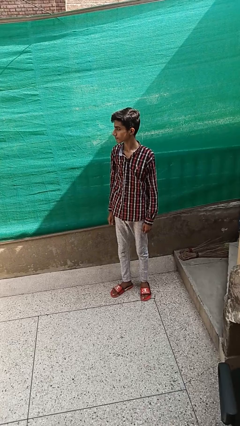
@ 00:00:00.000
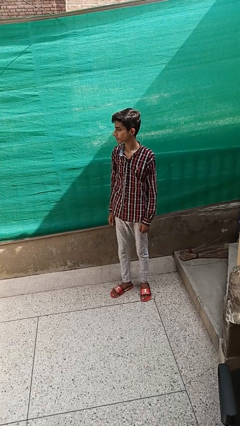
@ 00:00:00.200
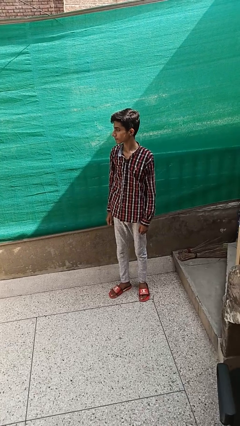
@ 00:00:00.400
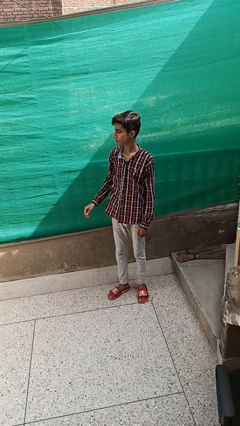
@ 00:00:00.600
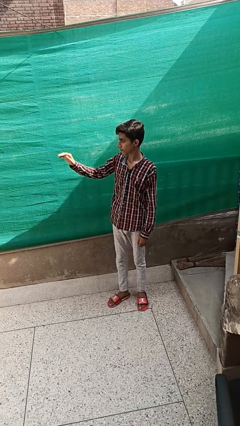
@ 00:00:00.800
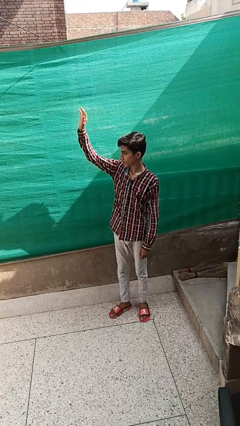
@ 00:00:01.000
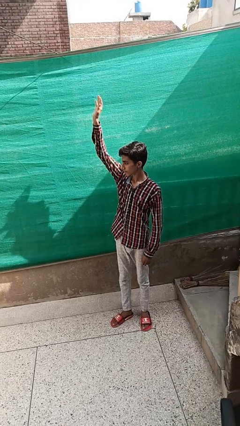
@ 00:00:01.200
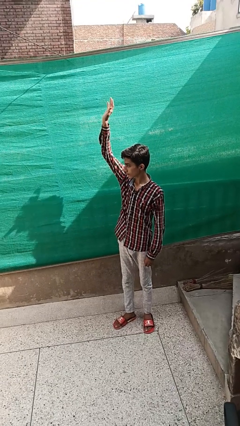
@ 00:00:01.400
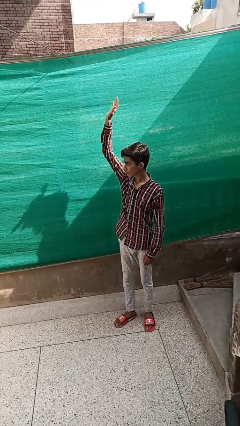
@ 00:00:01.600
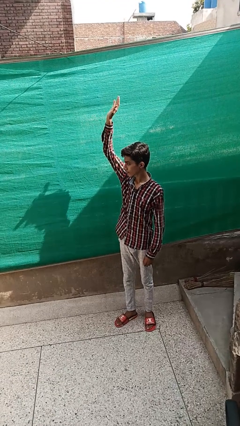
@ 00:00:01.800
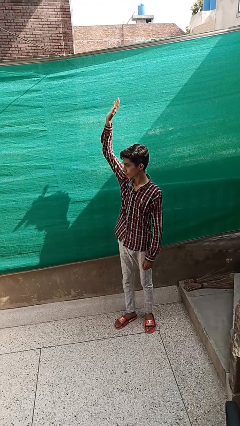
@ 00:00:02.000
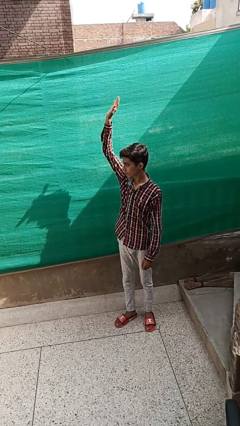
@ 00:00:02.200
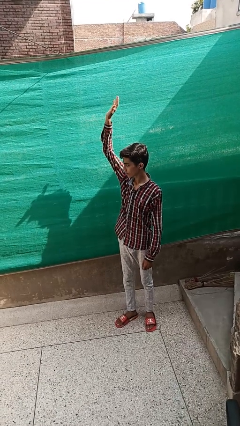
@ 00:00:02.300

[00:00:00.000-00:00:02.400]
person gestures raise hand

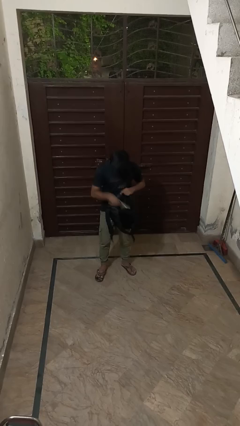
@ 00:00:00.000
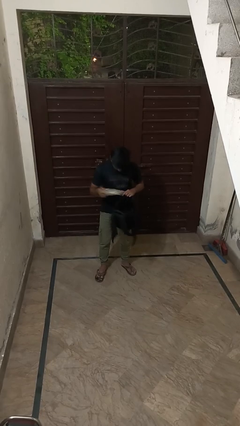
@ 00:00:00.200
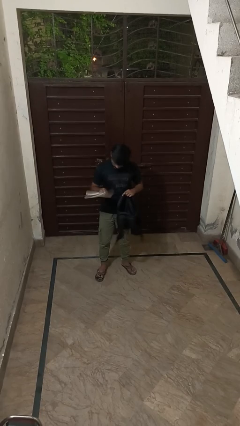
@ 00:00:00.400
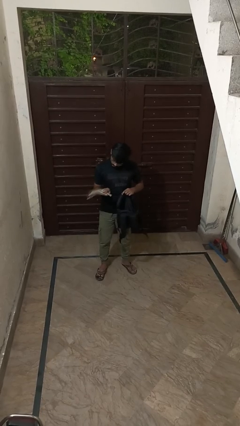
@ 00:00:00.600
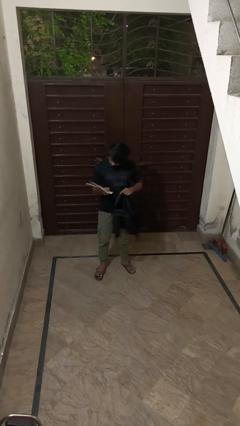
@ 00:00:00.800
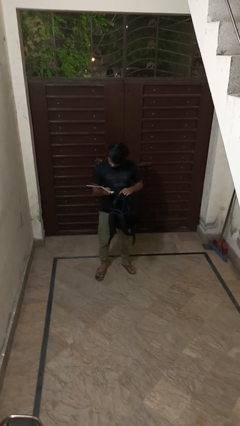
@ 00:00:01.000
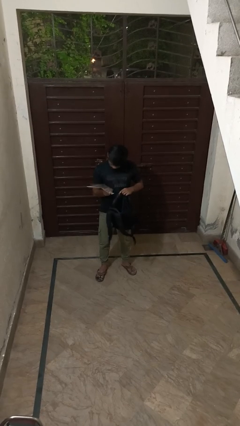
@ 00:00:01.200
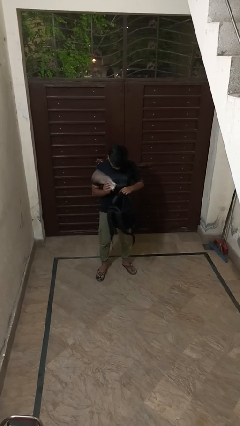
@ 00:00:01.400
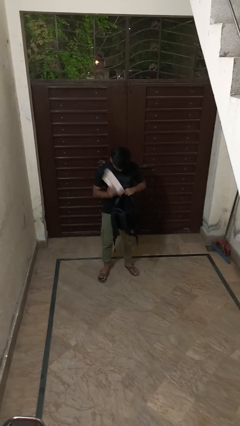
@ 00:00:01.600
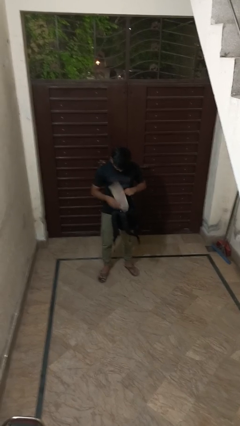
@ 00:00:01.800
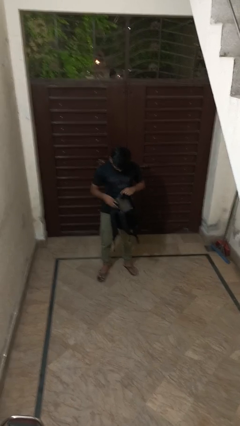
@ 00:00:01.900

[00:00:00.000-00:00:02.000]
person takes object from backpack

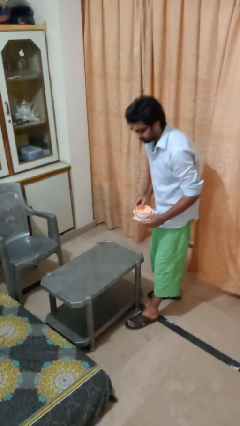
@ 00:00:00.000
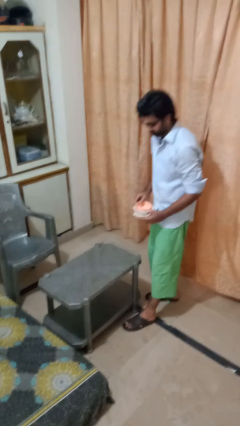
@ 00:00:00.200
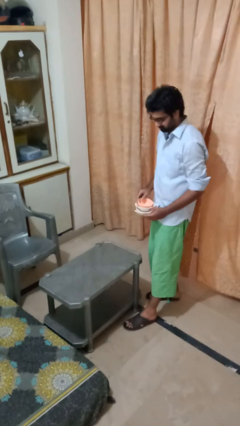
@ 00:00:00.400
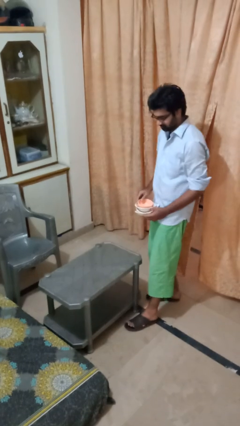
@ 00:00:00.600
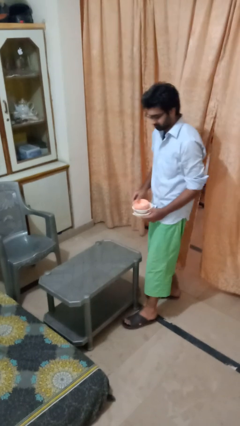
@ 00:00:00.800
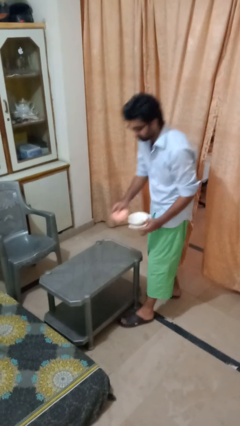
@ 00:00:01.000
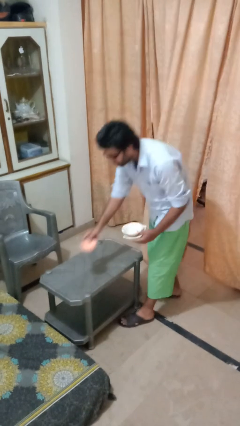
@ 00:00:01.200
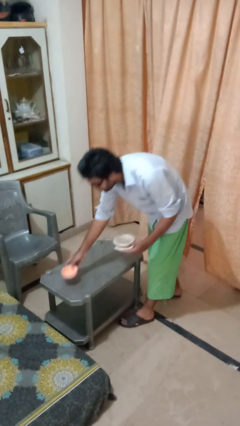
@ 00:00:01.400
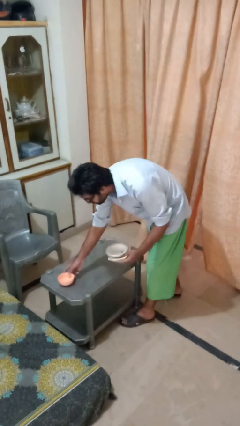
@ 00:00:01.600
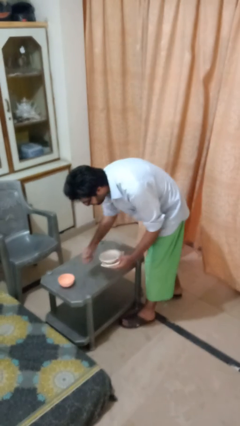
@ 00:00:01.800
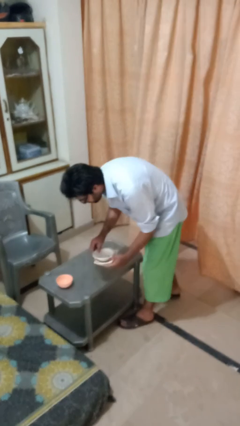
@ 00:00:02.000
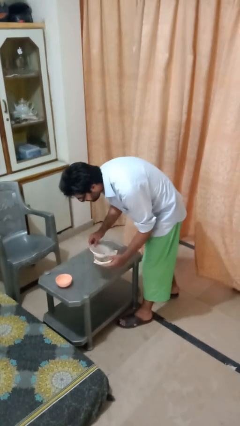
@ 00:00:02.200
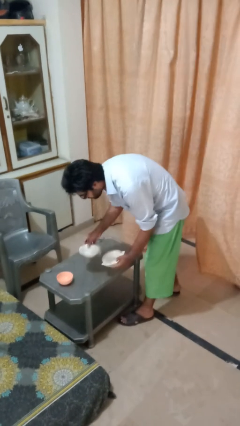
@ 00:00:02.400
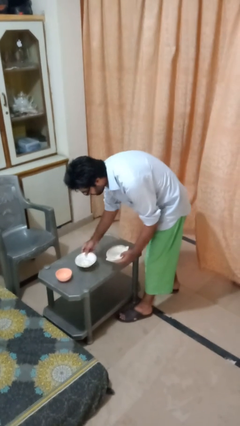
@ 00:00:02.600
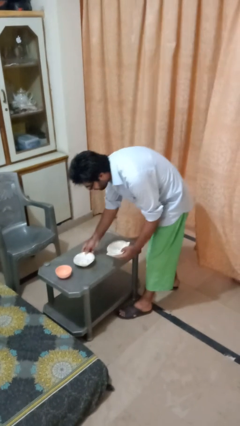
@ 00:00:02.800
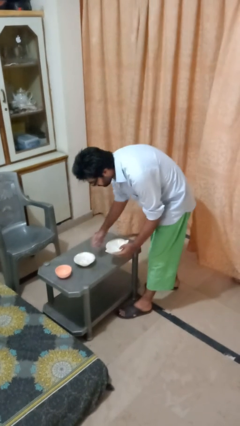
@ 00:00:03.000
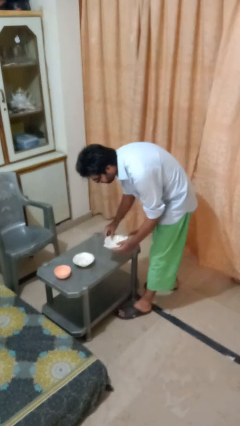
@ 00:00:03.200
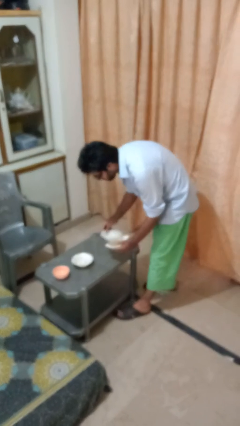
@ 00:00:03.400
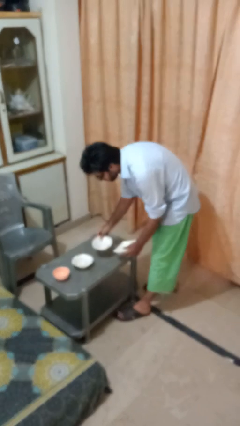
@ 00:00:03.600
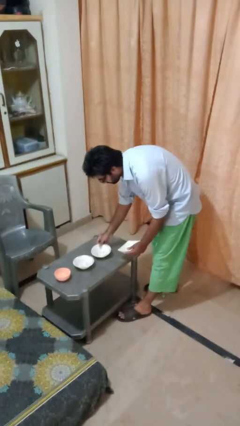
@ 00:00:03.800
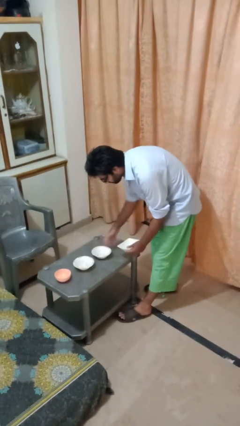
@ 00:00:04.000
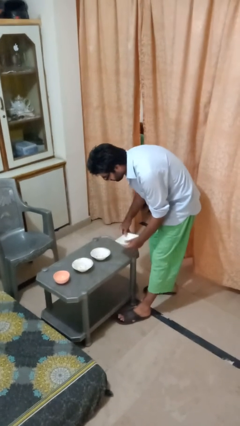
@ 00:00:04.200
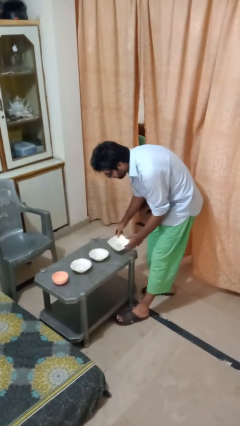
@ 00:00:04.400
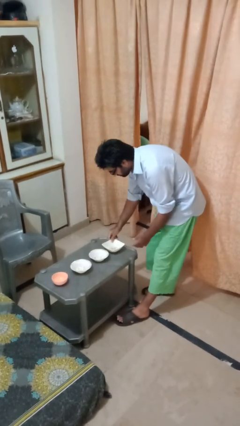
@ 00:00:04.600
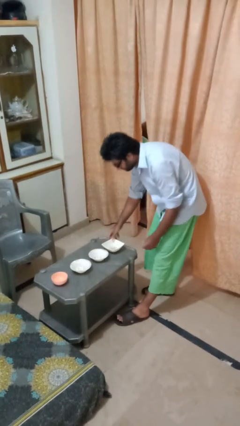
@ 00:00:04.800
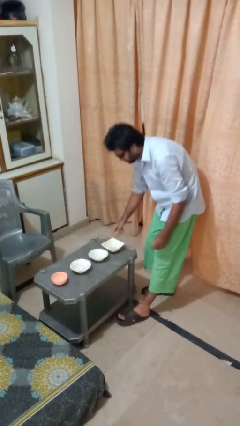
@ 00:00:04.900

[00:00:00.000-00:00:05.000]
person sets table

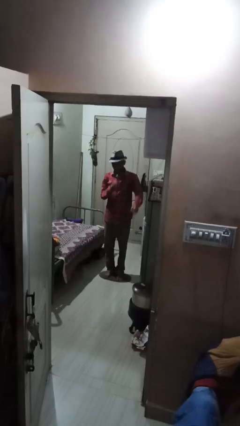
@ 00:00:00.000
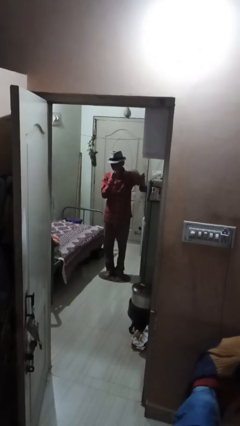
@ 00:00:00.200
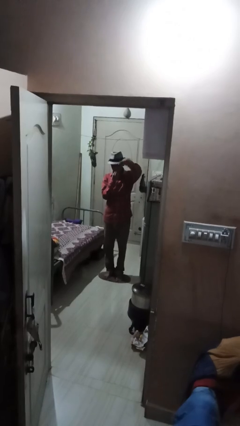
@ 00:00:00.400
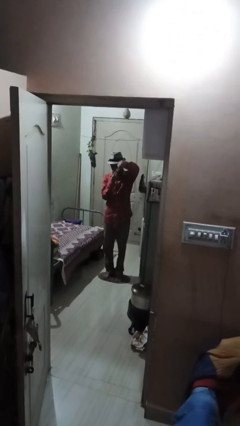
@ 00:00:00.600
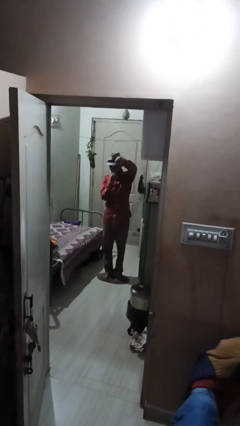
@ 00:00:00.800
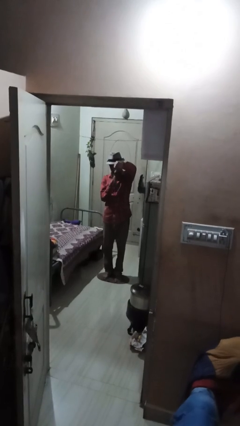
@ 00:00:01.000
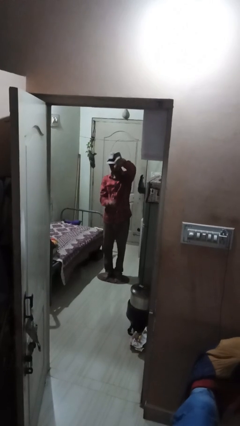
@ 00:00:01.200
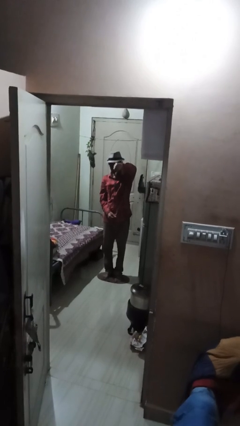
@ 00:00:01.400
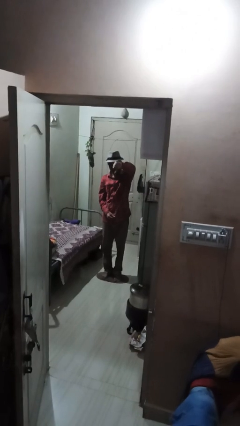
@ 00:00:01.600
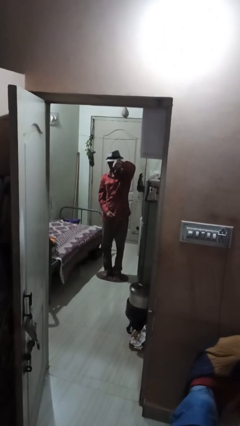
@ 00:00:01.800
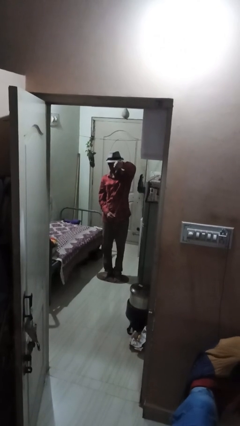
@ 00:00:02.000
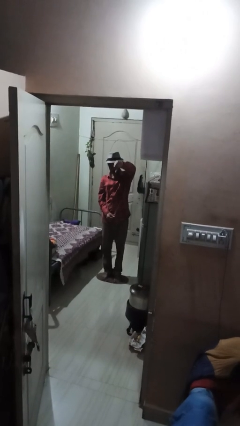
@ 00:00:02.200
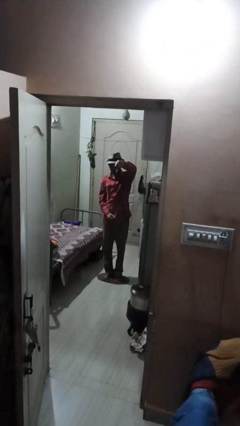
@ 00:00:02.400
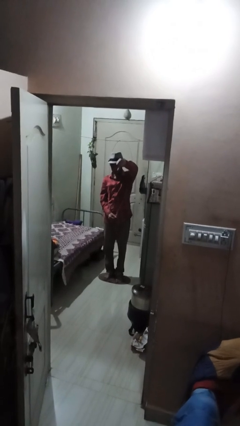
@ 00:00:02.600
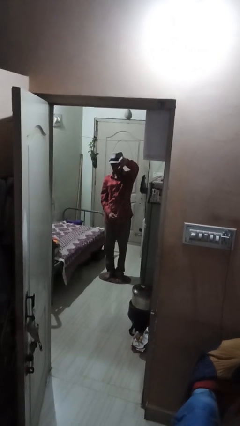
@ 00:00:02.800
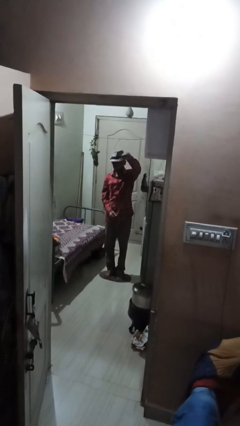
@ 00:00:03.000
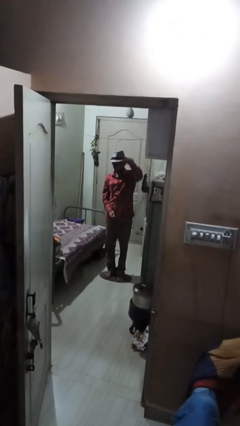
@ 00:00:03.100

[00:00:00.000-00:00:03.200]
person gestures thumbs down

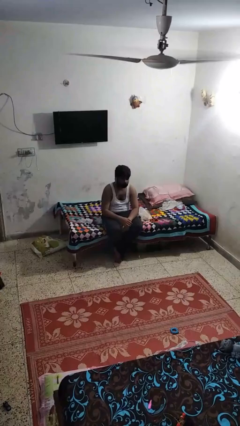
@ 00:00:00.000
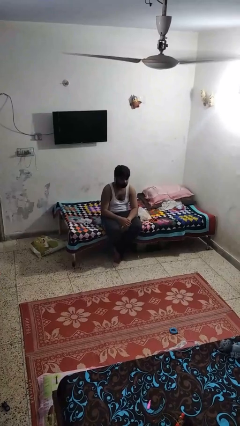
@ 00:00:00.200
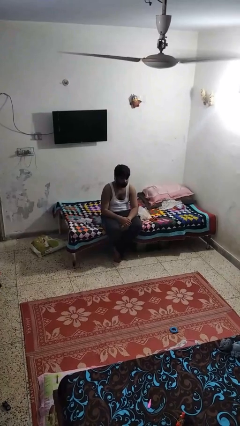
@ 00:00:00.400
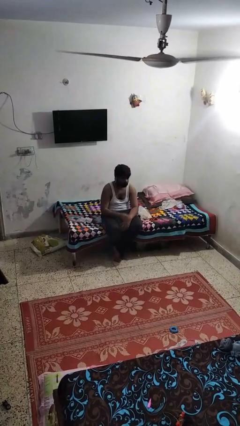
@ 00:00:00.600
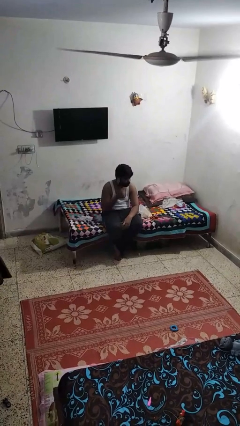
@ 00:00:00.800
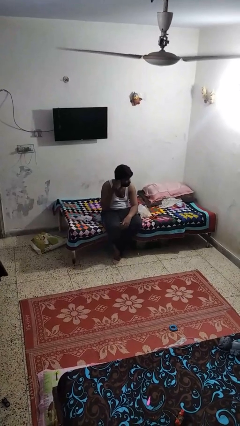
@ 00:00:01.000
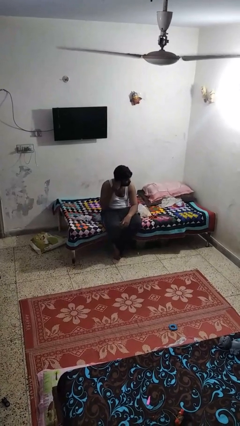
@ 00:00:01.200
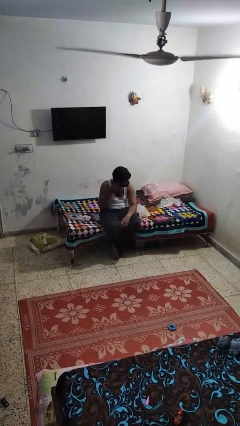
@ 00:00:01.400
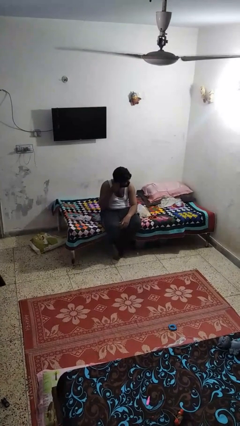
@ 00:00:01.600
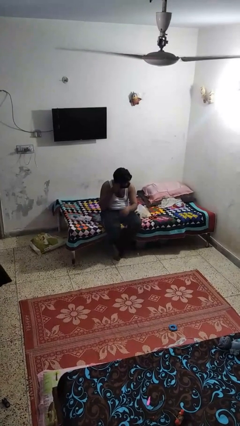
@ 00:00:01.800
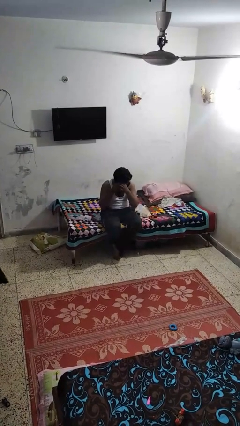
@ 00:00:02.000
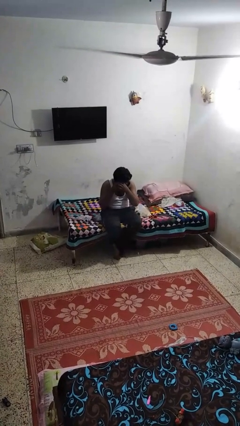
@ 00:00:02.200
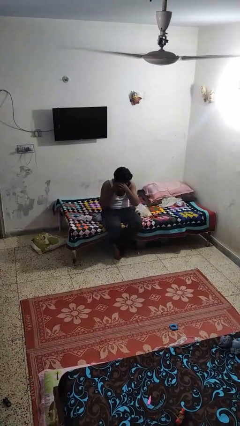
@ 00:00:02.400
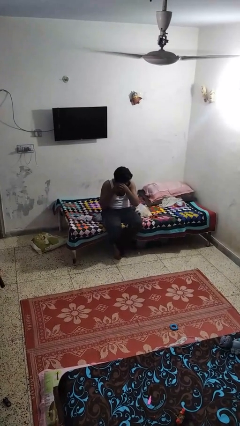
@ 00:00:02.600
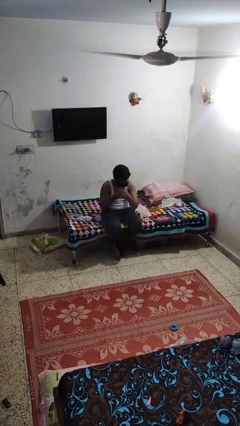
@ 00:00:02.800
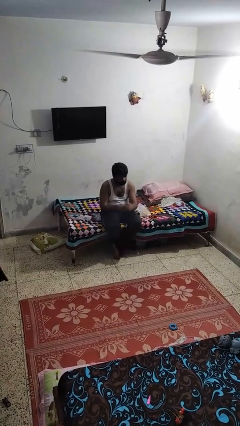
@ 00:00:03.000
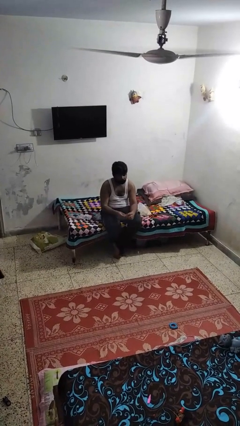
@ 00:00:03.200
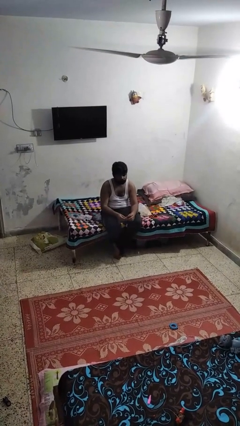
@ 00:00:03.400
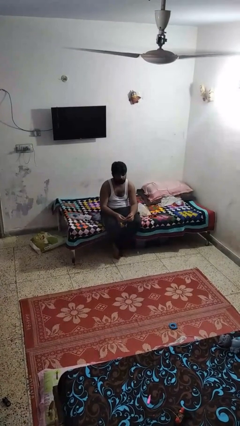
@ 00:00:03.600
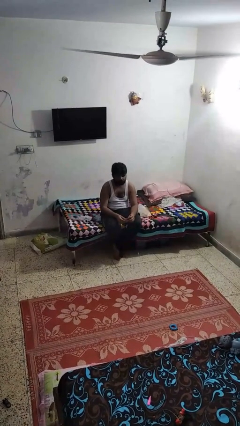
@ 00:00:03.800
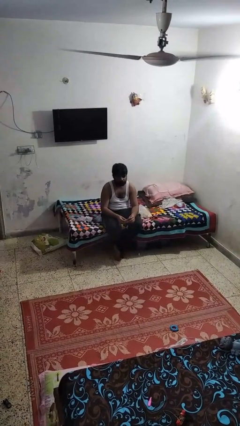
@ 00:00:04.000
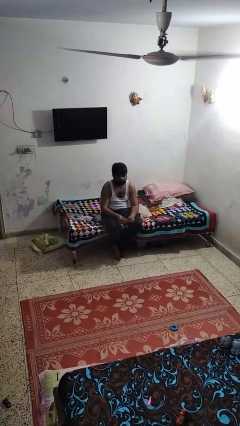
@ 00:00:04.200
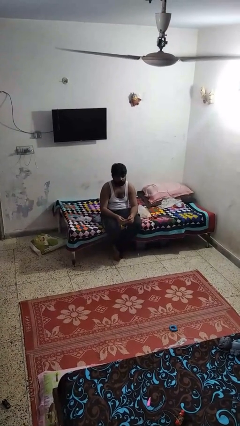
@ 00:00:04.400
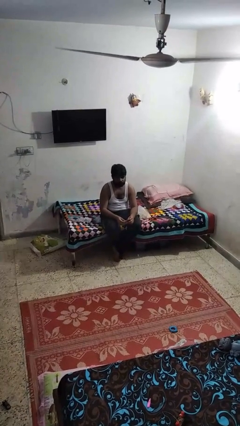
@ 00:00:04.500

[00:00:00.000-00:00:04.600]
person takes off earrings
